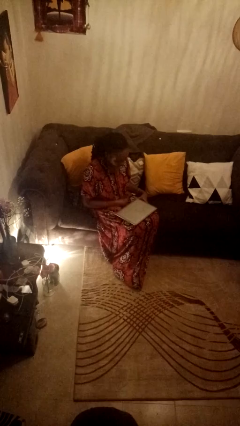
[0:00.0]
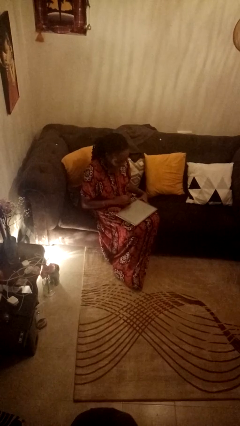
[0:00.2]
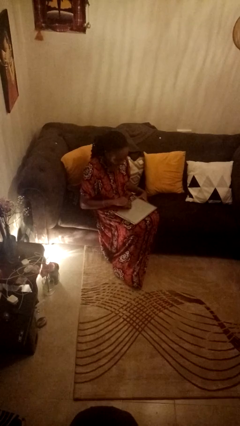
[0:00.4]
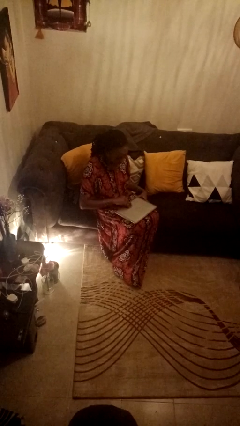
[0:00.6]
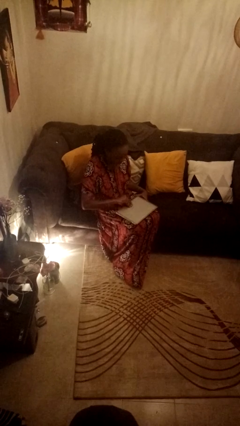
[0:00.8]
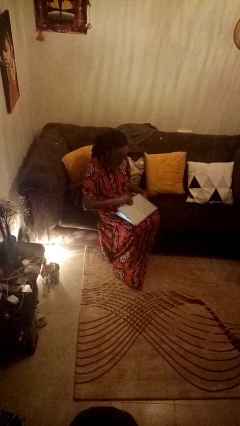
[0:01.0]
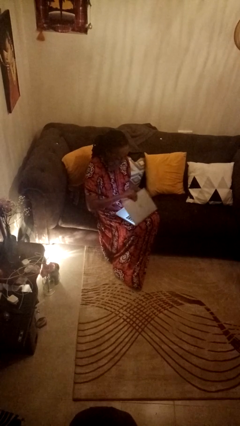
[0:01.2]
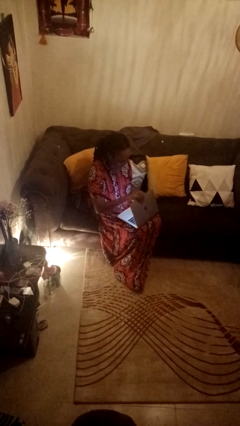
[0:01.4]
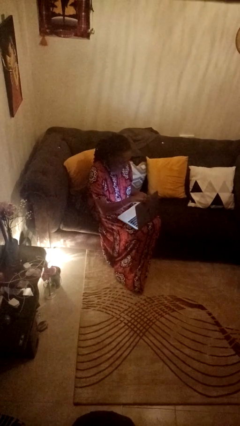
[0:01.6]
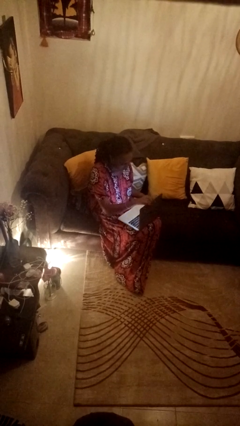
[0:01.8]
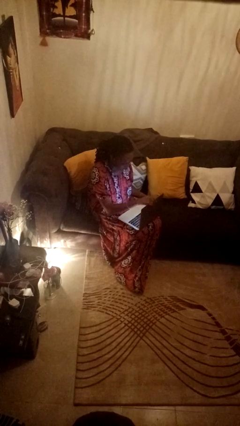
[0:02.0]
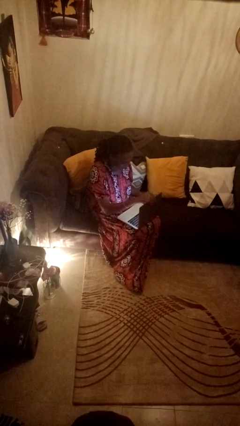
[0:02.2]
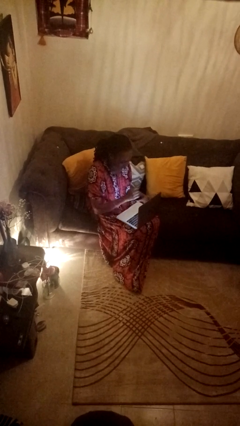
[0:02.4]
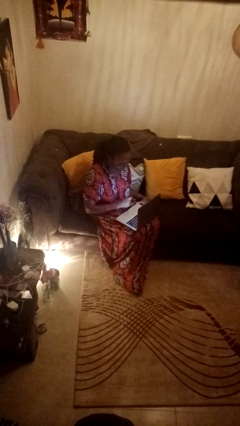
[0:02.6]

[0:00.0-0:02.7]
person opens laptop

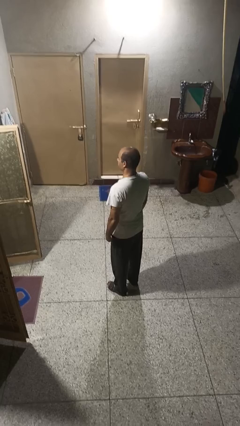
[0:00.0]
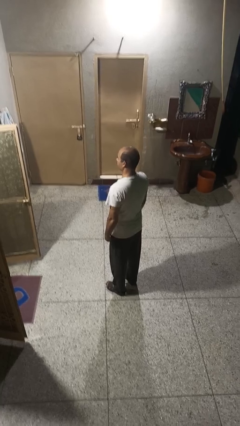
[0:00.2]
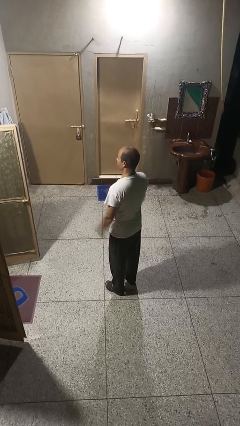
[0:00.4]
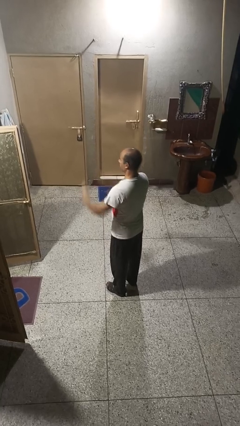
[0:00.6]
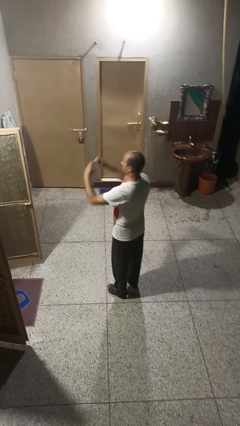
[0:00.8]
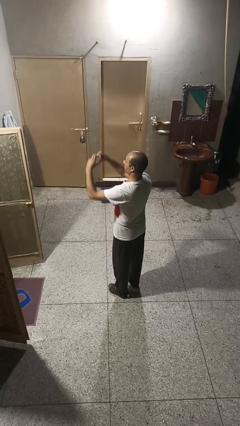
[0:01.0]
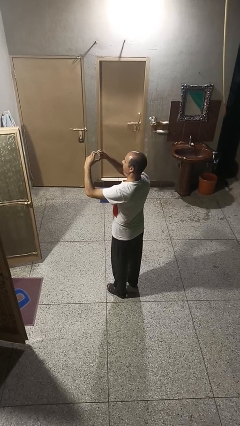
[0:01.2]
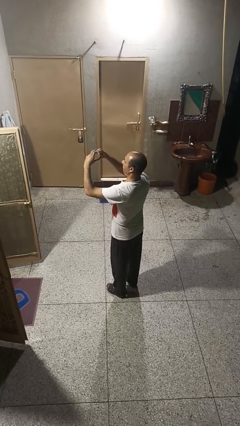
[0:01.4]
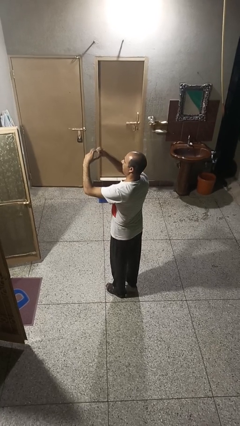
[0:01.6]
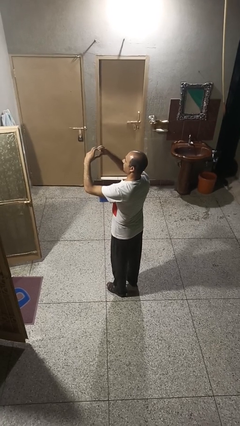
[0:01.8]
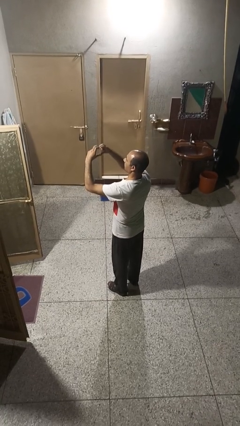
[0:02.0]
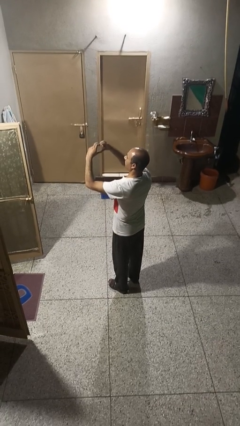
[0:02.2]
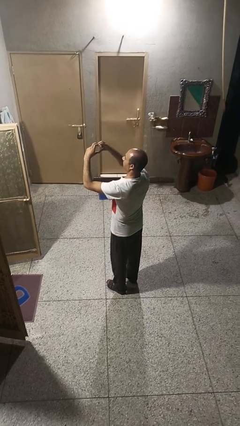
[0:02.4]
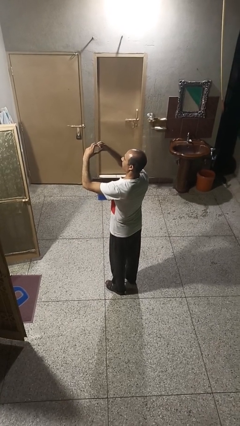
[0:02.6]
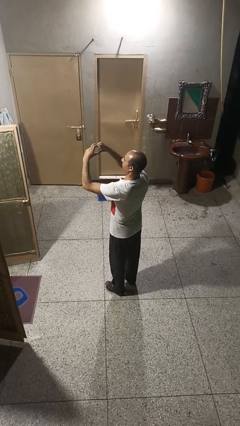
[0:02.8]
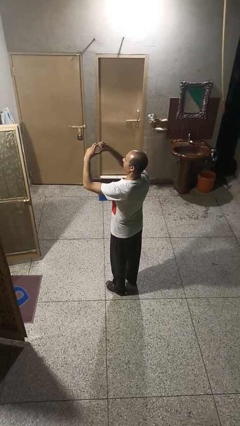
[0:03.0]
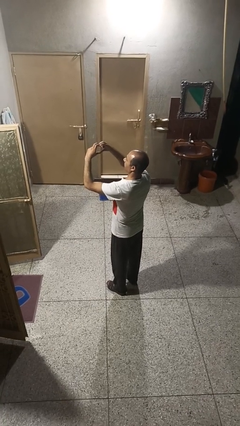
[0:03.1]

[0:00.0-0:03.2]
person gestures heart

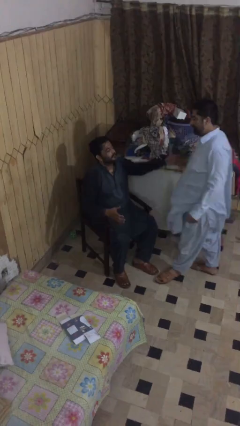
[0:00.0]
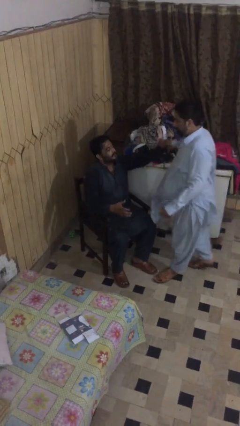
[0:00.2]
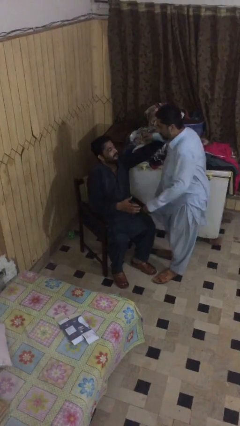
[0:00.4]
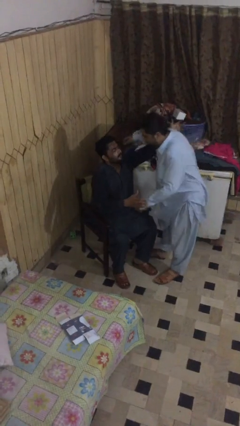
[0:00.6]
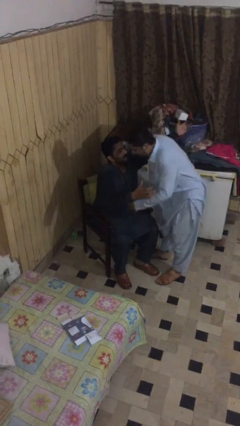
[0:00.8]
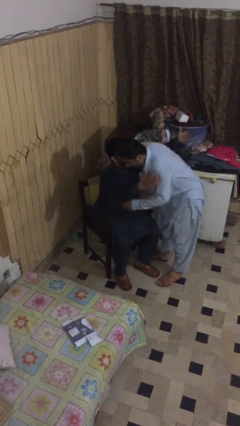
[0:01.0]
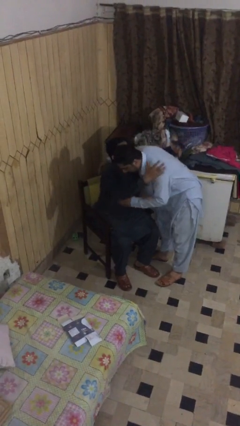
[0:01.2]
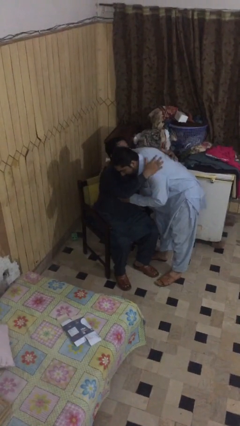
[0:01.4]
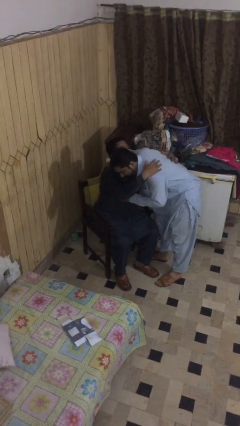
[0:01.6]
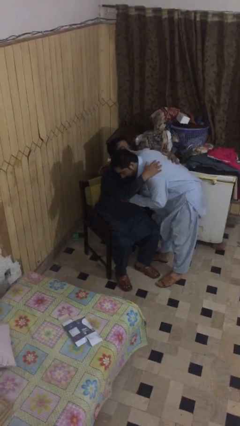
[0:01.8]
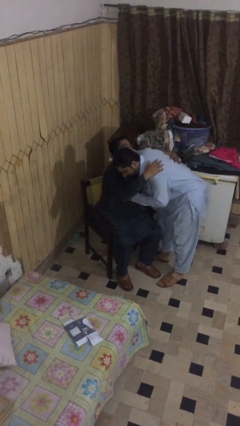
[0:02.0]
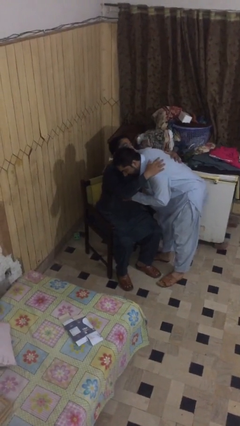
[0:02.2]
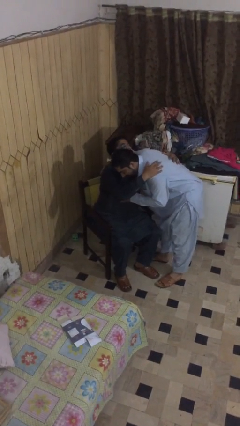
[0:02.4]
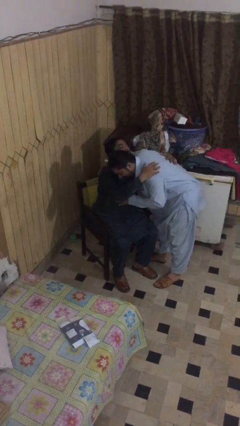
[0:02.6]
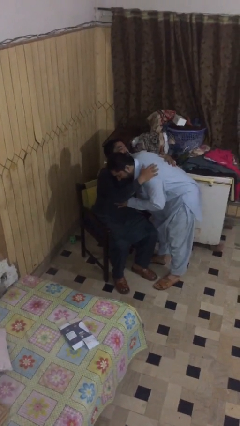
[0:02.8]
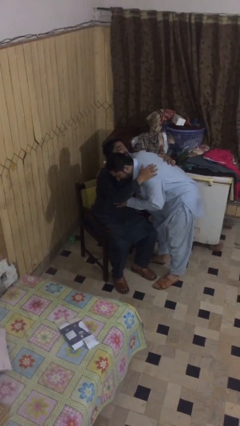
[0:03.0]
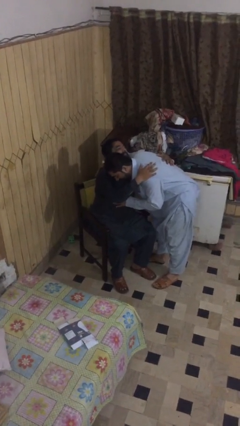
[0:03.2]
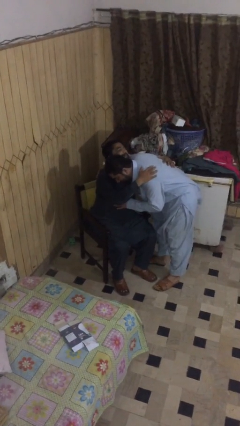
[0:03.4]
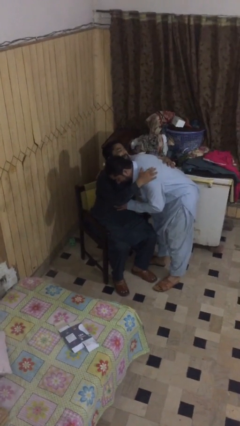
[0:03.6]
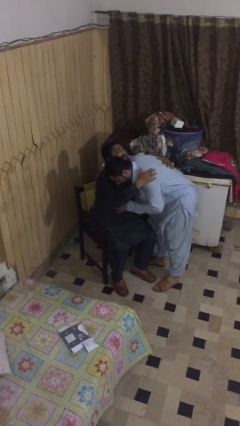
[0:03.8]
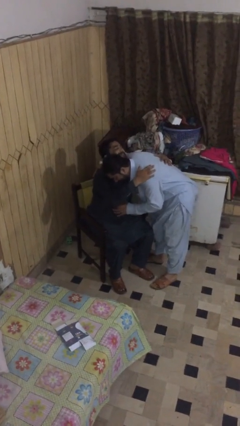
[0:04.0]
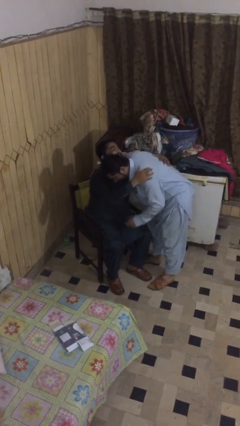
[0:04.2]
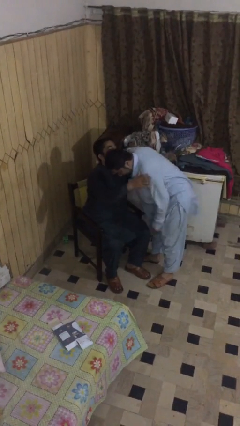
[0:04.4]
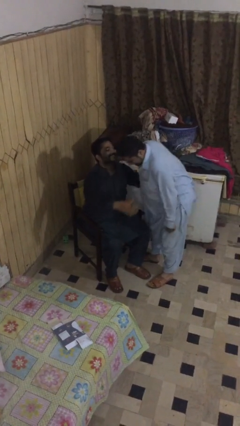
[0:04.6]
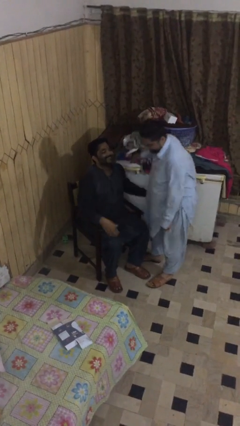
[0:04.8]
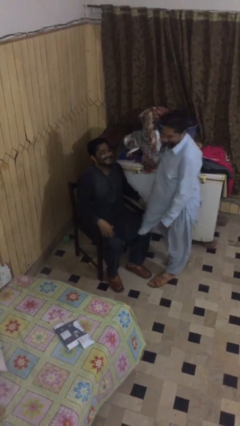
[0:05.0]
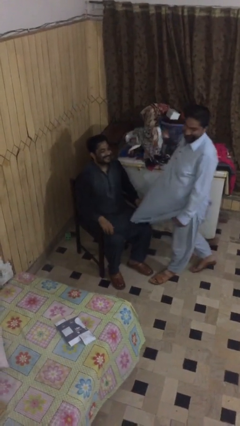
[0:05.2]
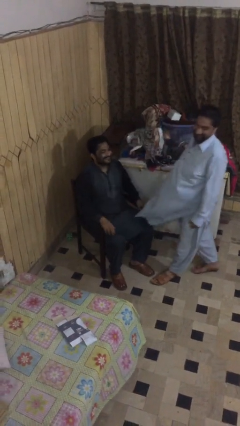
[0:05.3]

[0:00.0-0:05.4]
person embraces person

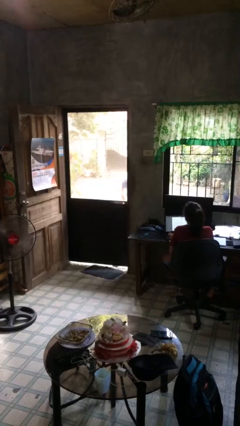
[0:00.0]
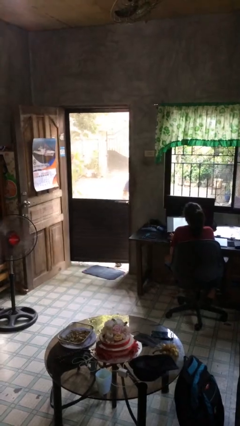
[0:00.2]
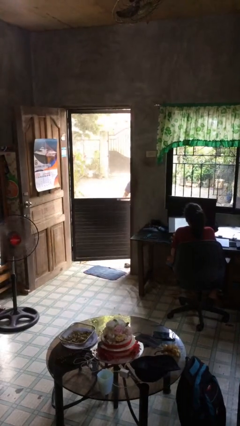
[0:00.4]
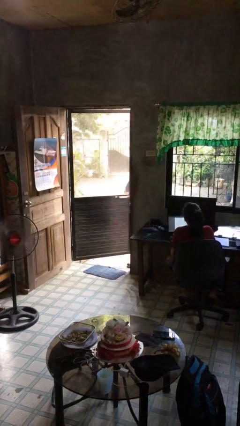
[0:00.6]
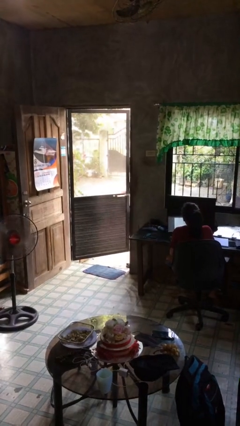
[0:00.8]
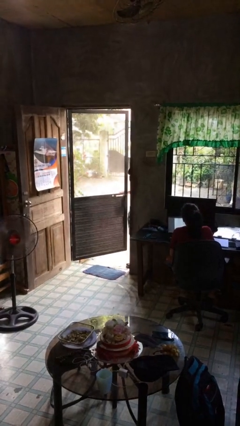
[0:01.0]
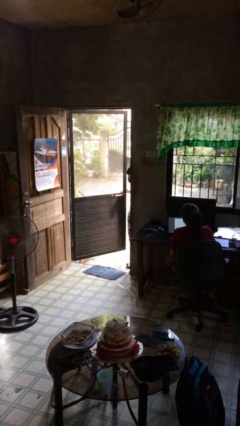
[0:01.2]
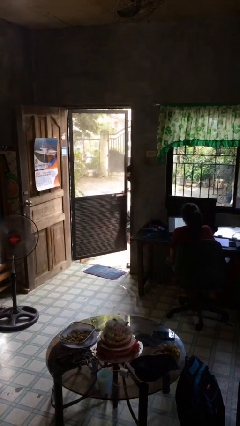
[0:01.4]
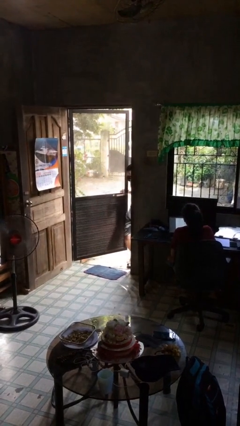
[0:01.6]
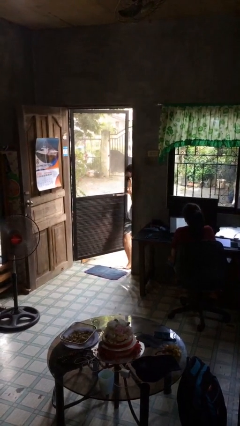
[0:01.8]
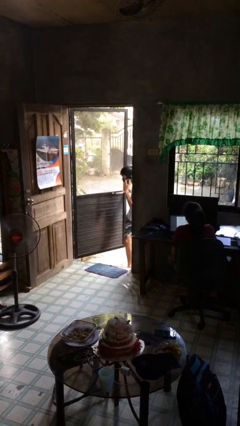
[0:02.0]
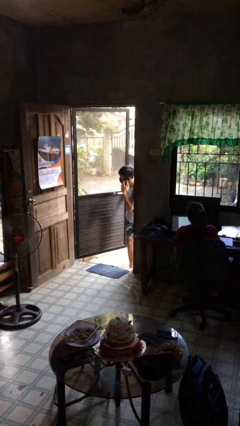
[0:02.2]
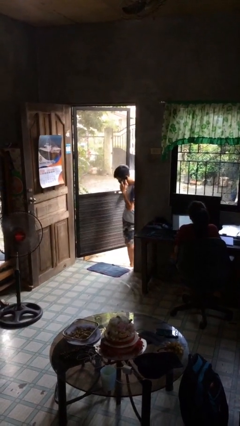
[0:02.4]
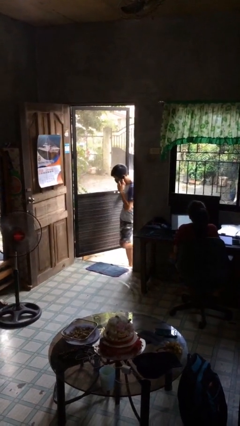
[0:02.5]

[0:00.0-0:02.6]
person opens facility door

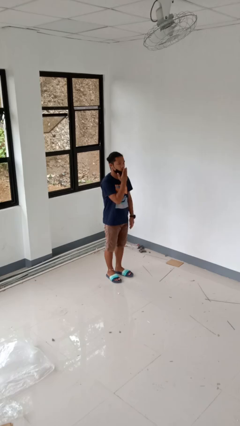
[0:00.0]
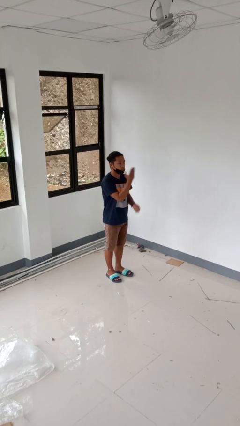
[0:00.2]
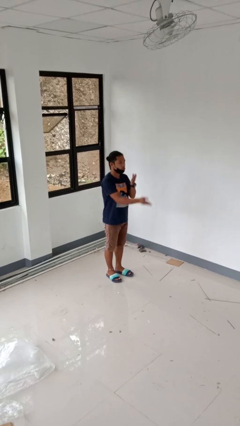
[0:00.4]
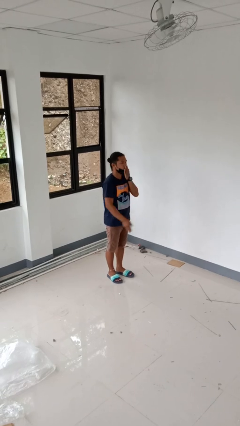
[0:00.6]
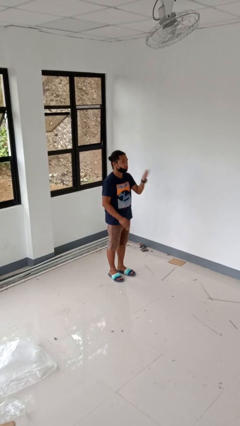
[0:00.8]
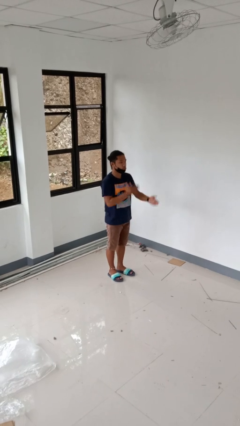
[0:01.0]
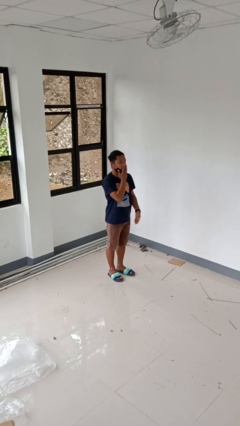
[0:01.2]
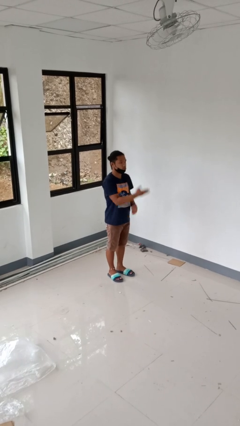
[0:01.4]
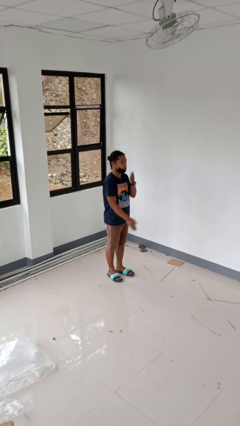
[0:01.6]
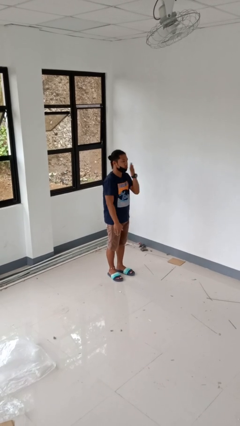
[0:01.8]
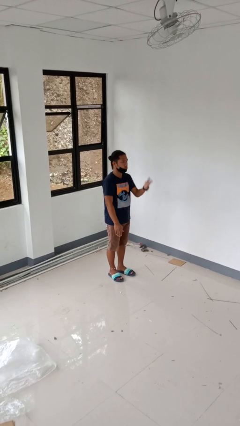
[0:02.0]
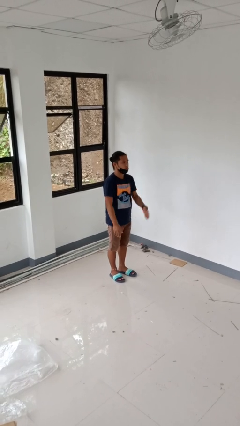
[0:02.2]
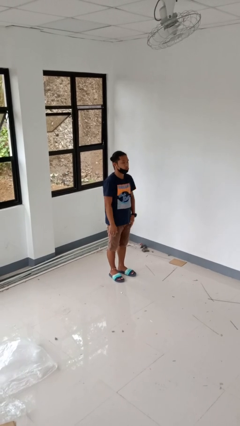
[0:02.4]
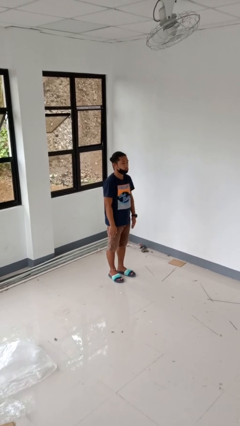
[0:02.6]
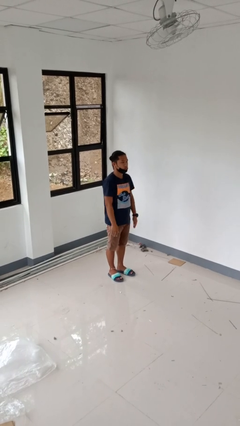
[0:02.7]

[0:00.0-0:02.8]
person gestures blow kiss

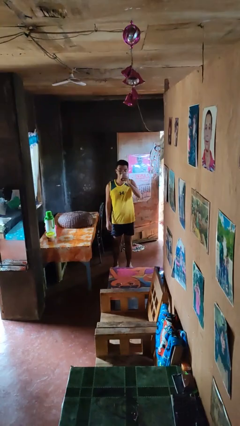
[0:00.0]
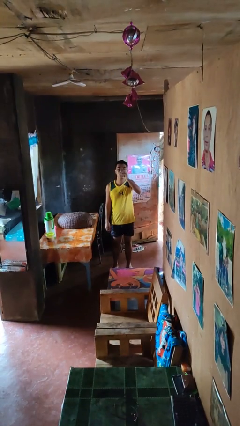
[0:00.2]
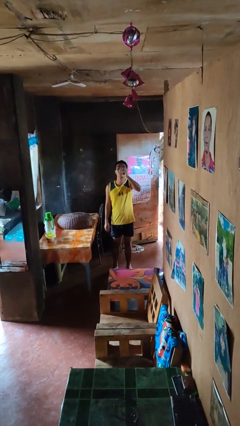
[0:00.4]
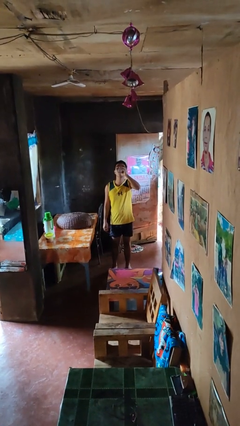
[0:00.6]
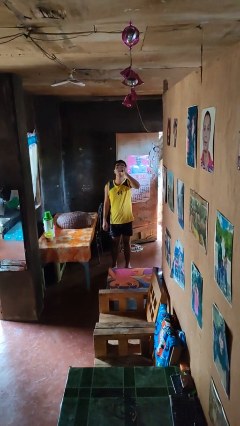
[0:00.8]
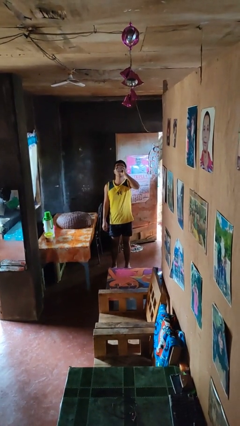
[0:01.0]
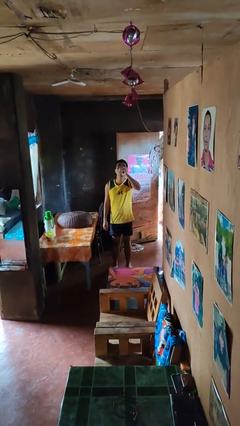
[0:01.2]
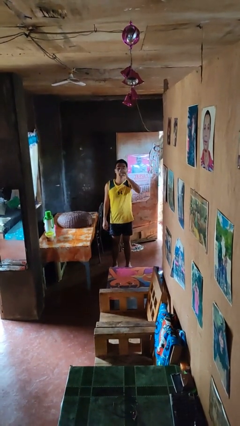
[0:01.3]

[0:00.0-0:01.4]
person drinks from beverage can
